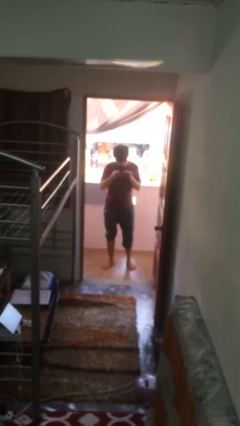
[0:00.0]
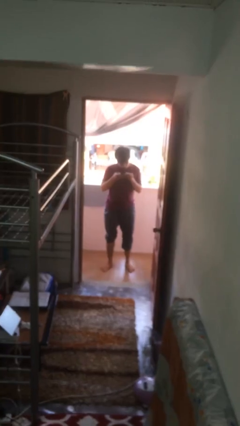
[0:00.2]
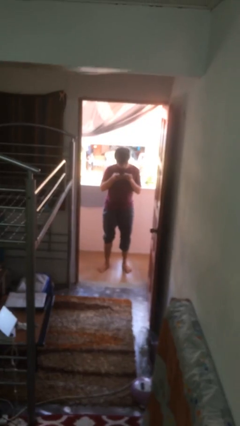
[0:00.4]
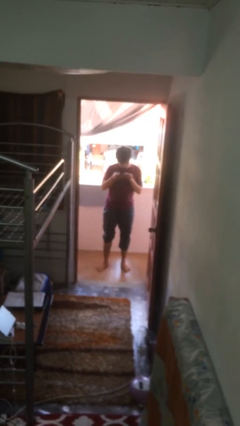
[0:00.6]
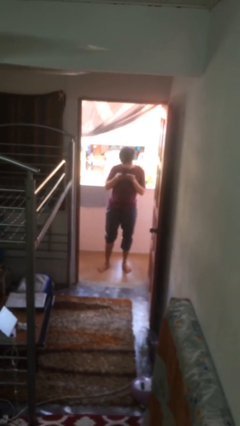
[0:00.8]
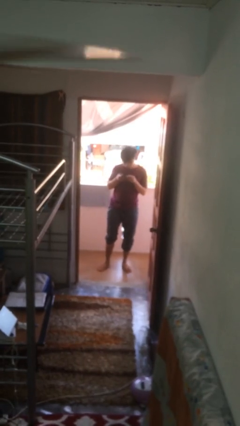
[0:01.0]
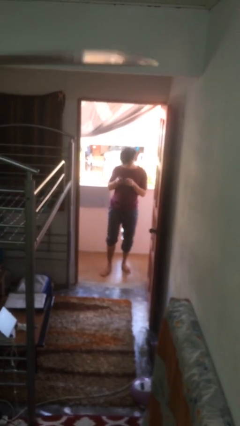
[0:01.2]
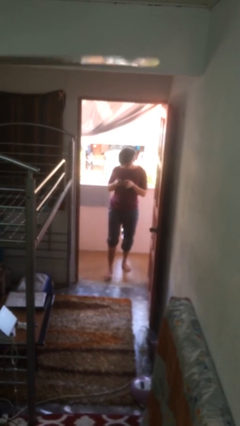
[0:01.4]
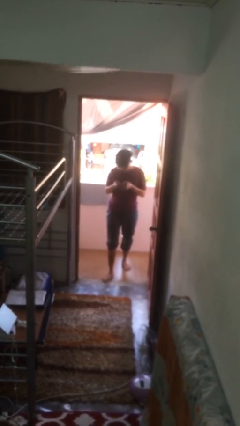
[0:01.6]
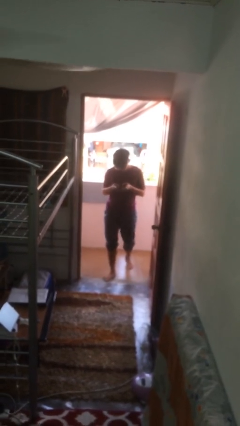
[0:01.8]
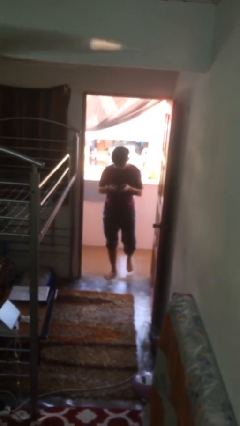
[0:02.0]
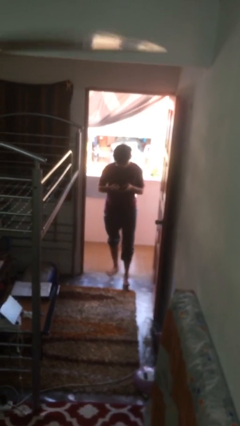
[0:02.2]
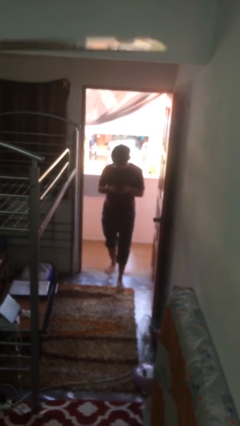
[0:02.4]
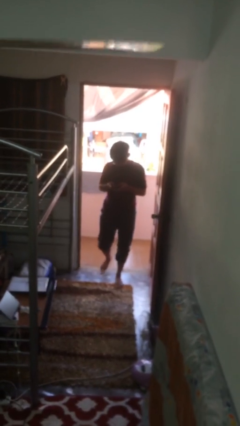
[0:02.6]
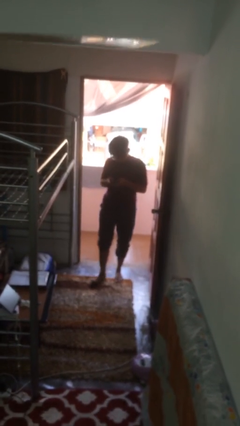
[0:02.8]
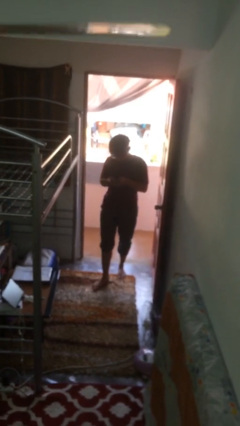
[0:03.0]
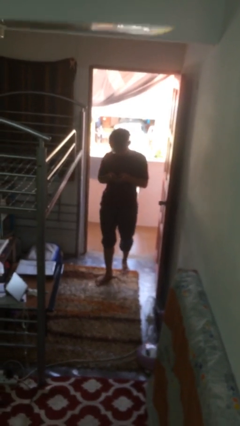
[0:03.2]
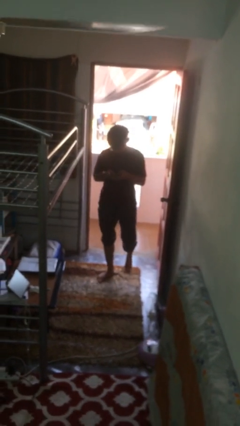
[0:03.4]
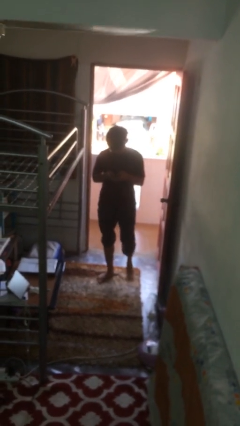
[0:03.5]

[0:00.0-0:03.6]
person enters scene through structure

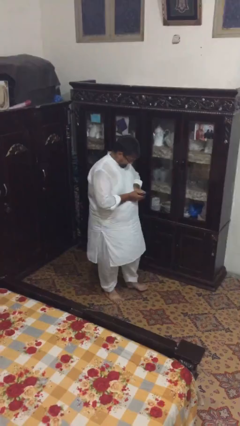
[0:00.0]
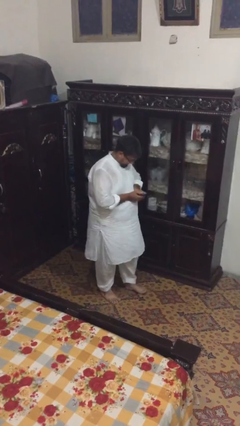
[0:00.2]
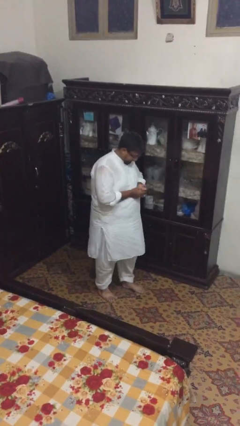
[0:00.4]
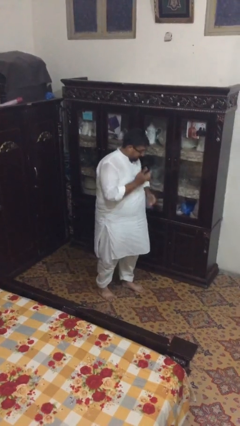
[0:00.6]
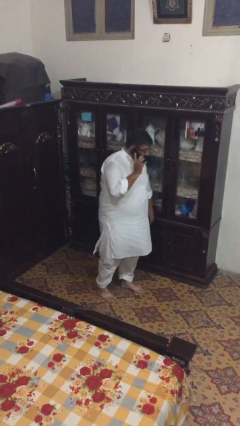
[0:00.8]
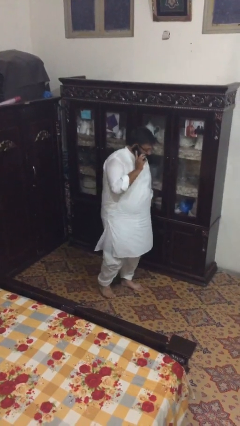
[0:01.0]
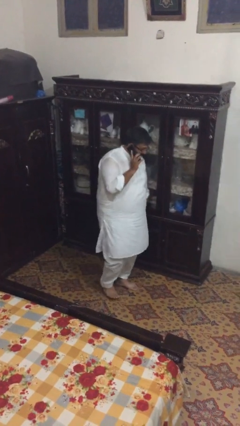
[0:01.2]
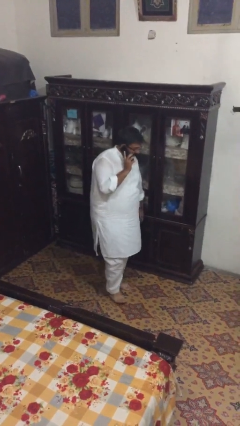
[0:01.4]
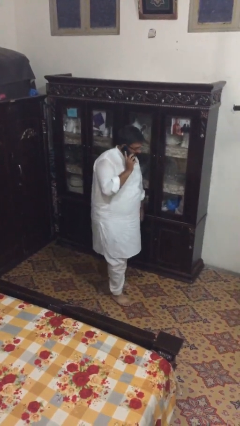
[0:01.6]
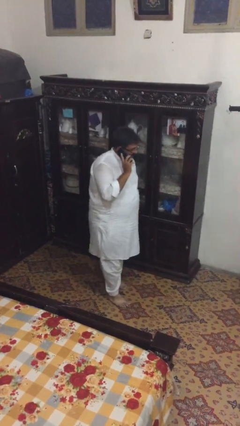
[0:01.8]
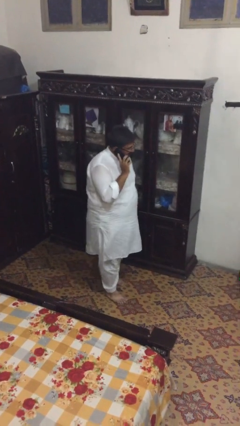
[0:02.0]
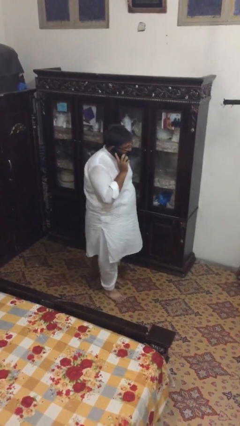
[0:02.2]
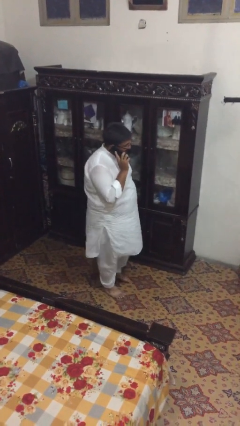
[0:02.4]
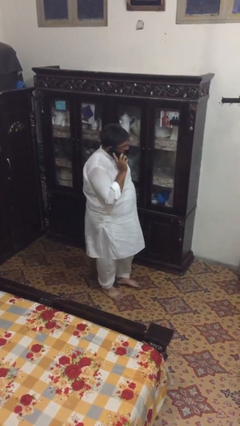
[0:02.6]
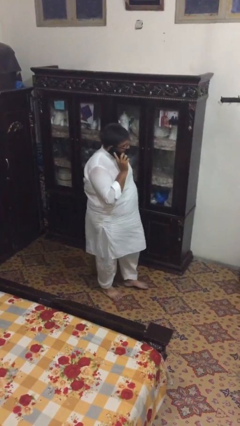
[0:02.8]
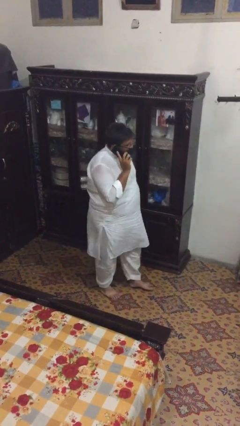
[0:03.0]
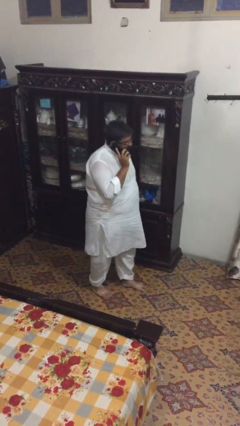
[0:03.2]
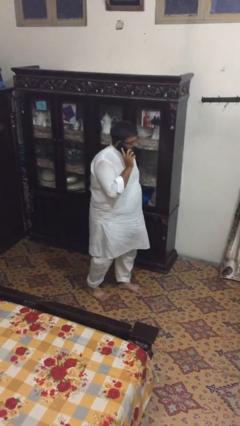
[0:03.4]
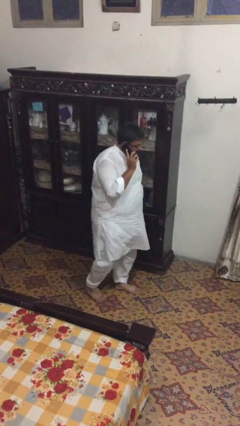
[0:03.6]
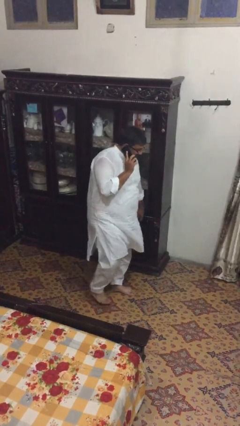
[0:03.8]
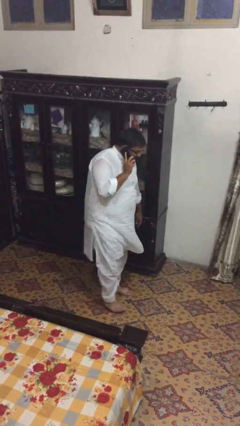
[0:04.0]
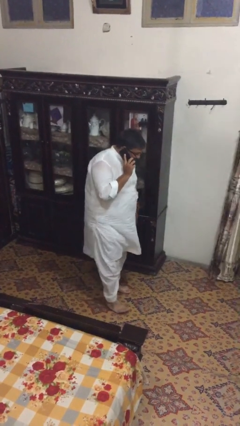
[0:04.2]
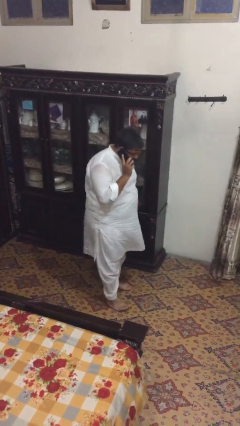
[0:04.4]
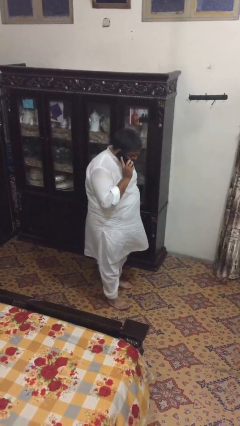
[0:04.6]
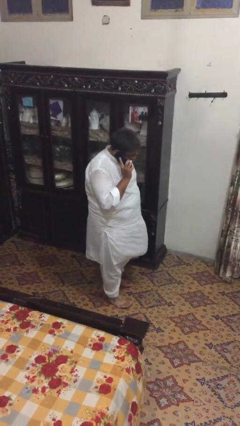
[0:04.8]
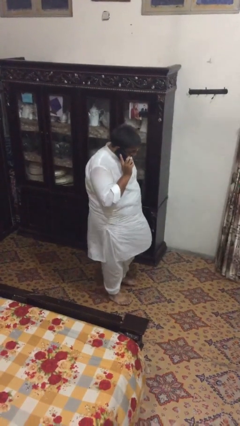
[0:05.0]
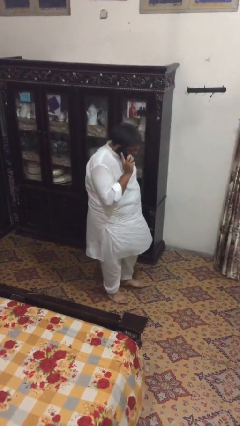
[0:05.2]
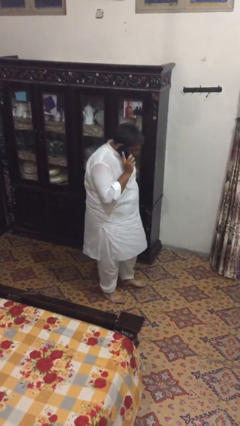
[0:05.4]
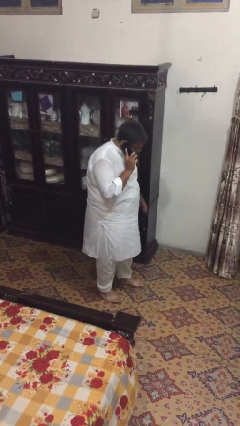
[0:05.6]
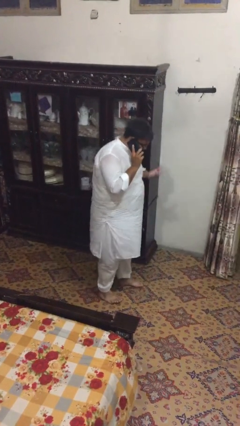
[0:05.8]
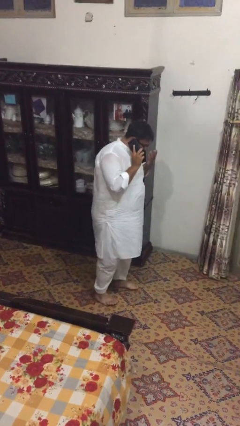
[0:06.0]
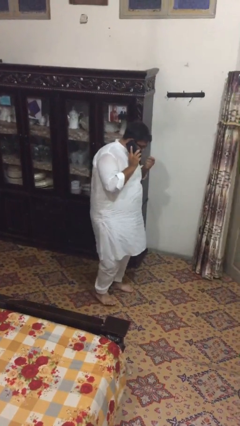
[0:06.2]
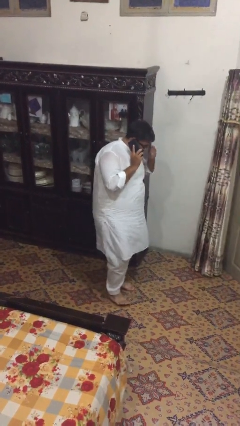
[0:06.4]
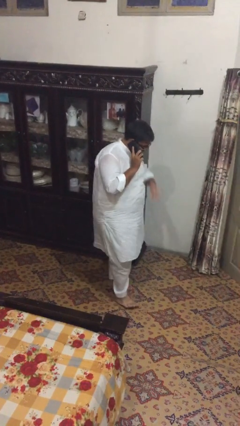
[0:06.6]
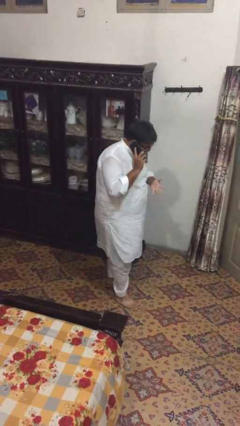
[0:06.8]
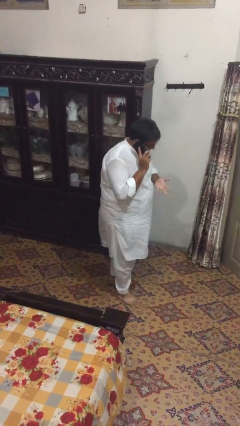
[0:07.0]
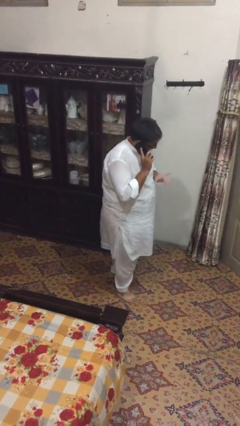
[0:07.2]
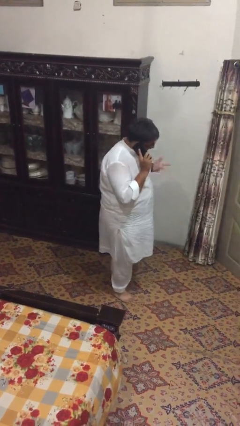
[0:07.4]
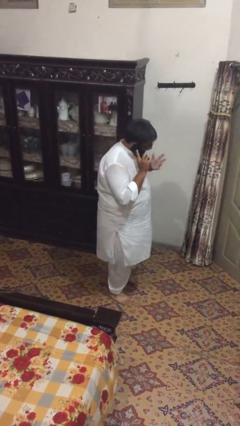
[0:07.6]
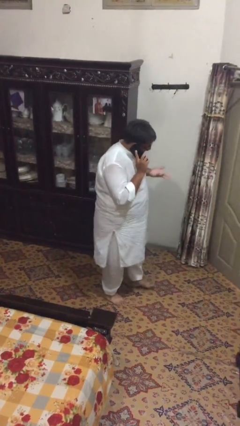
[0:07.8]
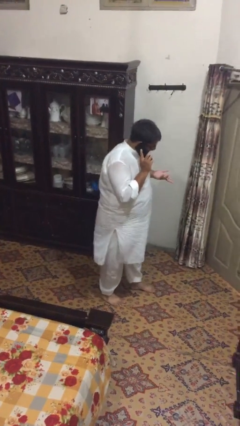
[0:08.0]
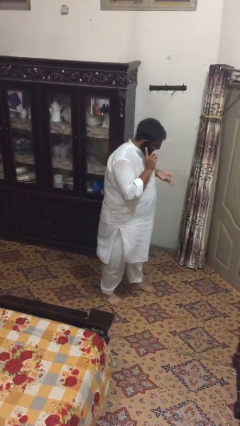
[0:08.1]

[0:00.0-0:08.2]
person talks on phone

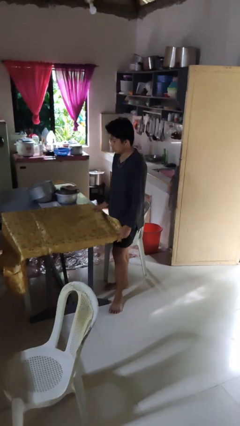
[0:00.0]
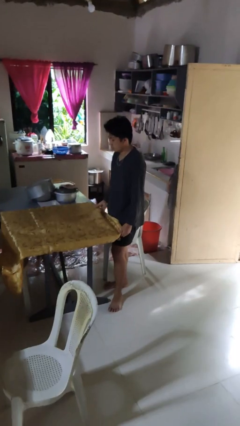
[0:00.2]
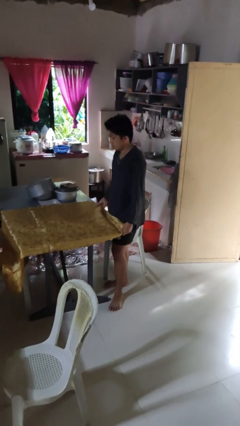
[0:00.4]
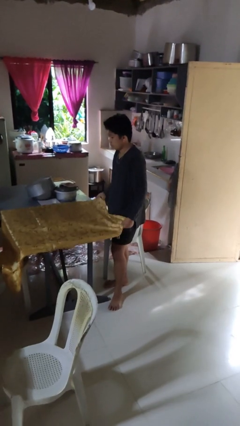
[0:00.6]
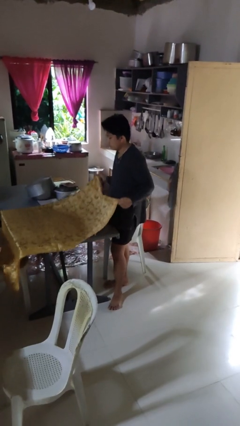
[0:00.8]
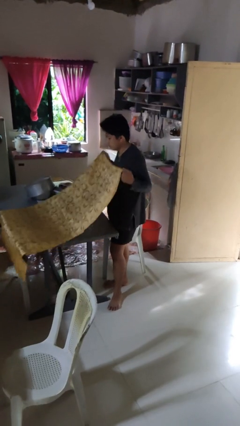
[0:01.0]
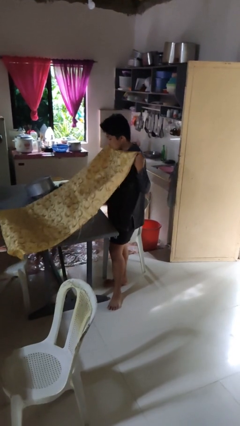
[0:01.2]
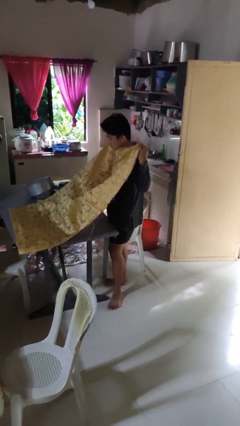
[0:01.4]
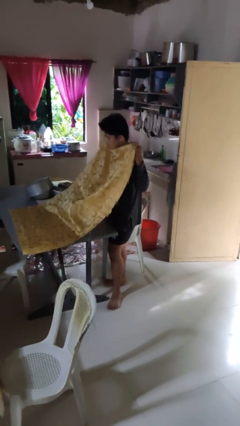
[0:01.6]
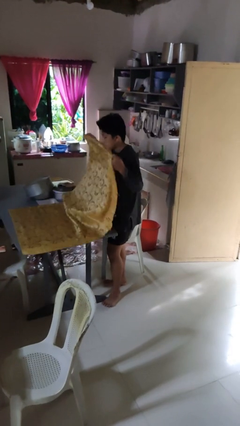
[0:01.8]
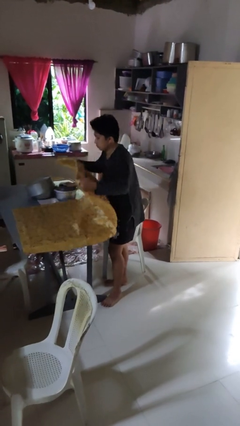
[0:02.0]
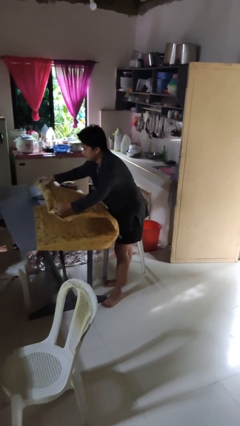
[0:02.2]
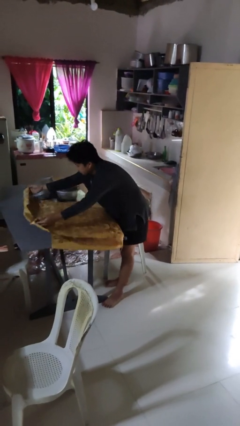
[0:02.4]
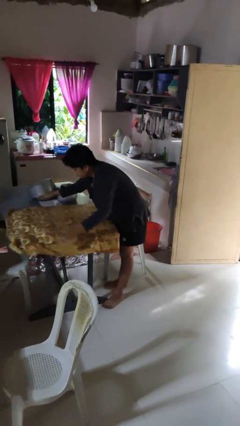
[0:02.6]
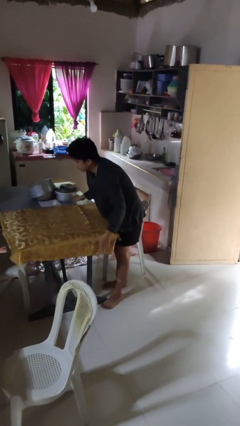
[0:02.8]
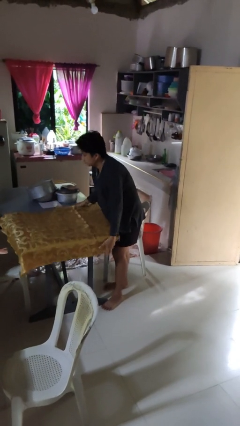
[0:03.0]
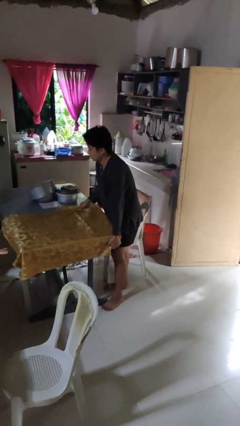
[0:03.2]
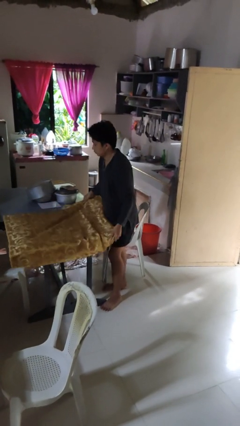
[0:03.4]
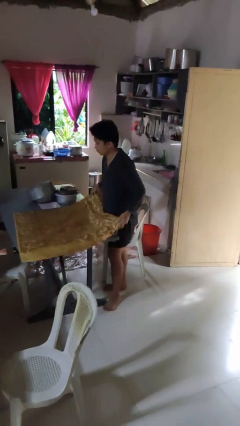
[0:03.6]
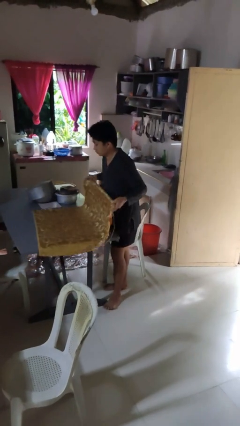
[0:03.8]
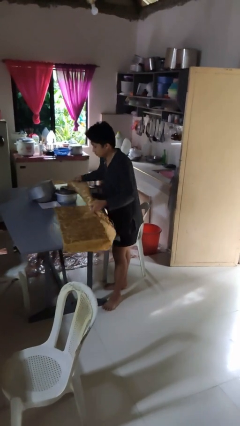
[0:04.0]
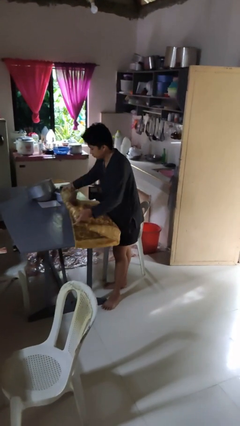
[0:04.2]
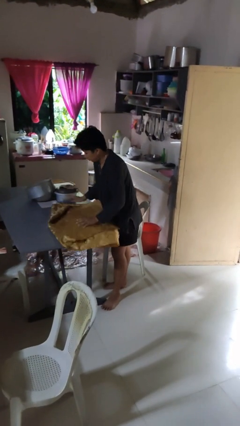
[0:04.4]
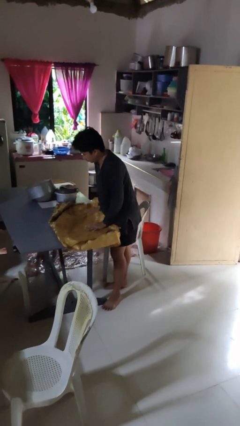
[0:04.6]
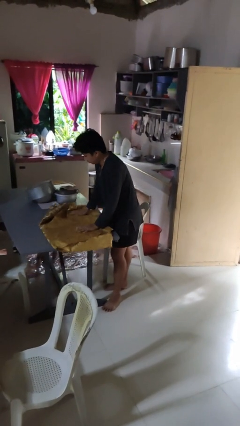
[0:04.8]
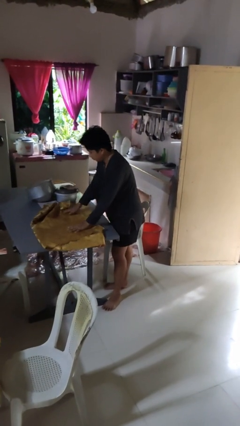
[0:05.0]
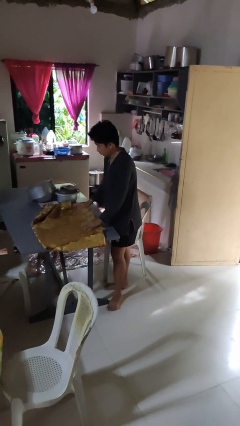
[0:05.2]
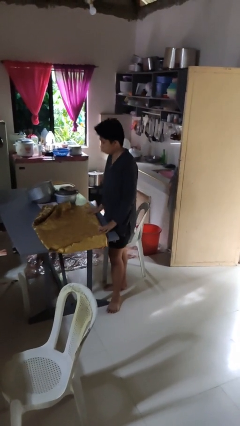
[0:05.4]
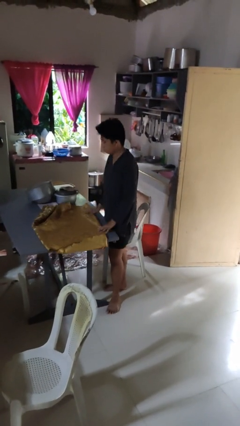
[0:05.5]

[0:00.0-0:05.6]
person folds tablecloth
